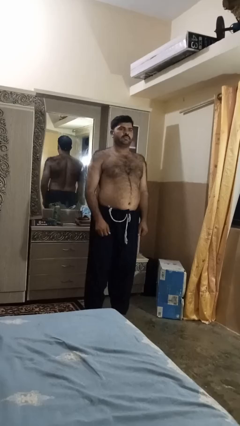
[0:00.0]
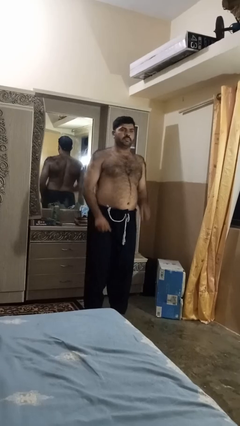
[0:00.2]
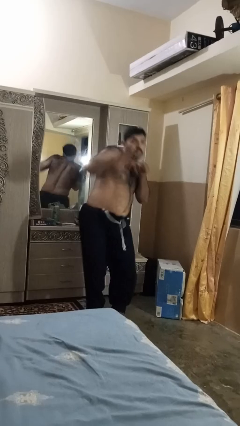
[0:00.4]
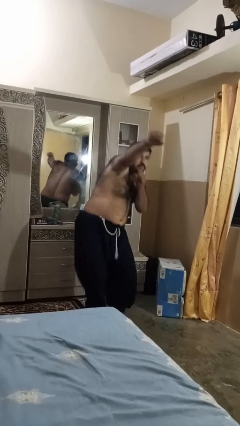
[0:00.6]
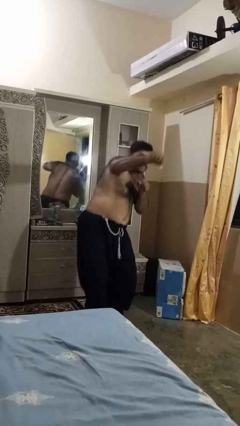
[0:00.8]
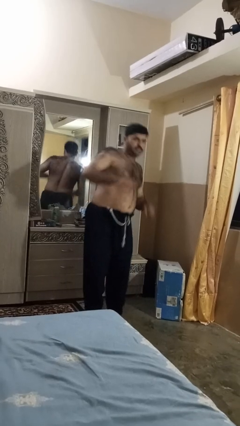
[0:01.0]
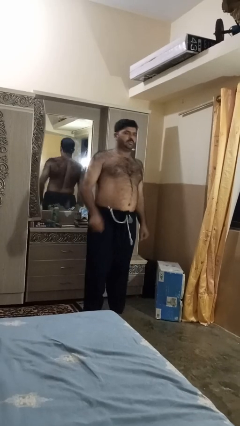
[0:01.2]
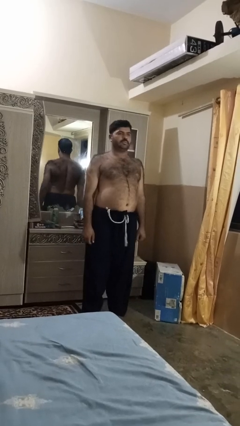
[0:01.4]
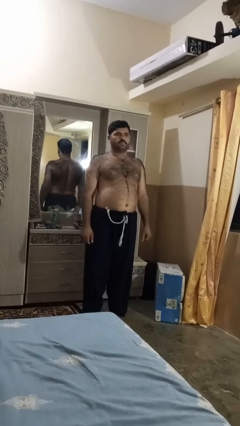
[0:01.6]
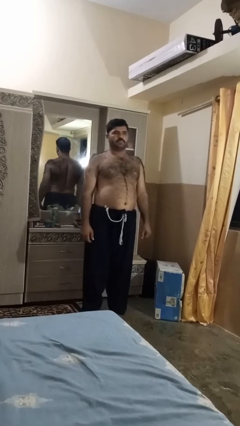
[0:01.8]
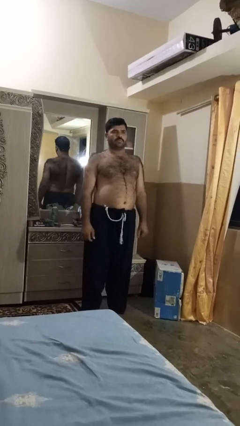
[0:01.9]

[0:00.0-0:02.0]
person karate chop

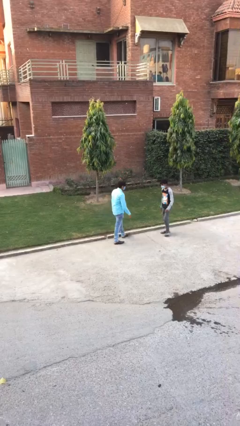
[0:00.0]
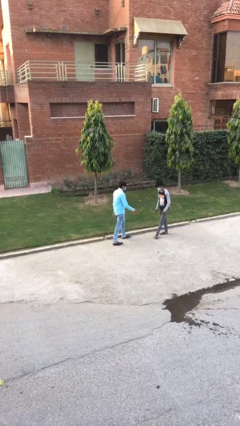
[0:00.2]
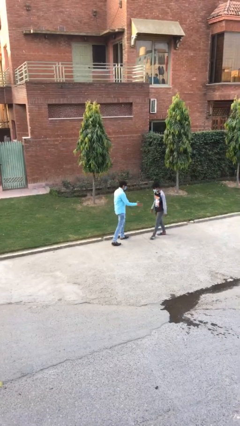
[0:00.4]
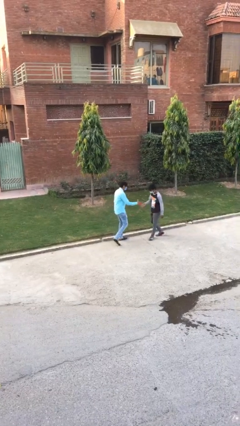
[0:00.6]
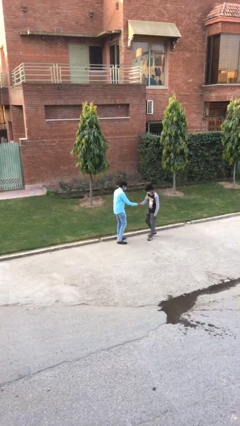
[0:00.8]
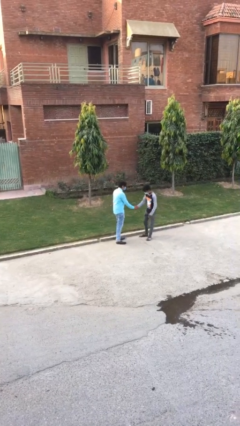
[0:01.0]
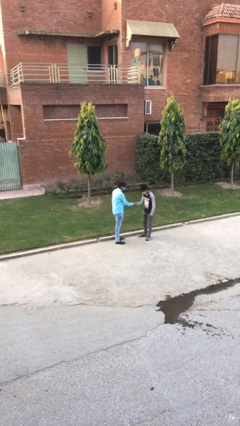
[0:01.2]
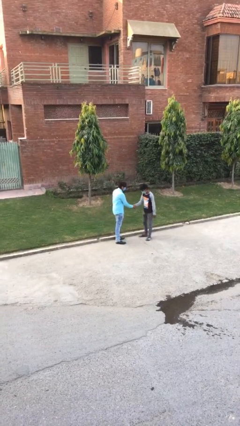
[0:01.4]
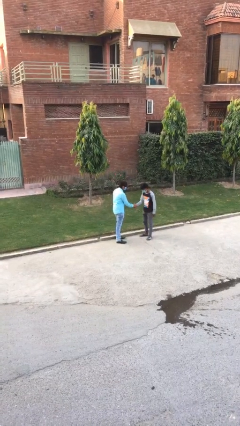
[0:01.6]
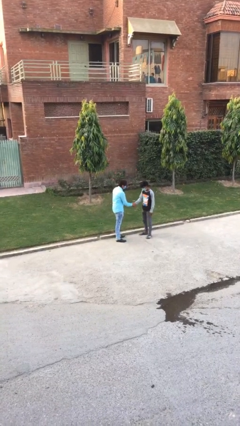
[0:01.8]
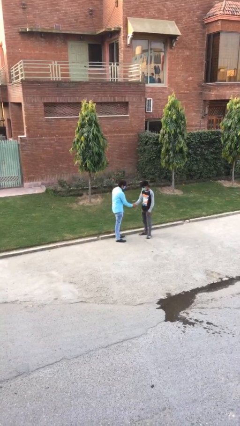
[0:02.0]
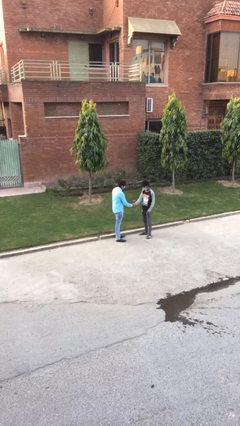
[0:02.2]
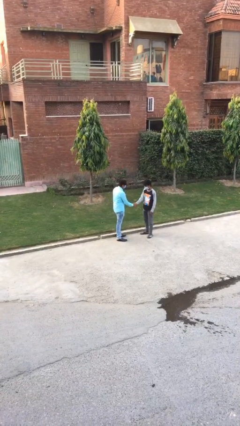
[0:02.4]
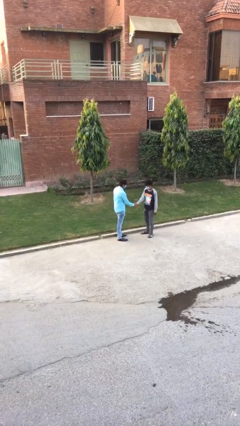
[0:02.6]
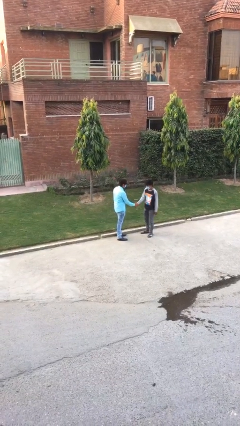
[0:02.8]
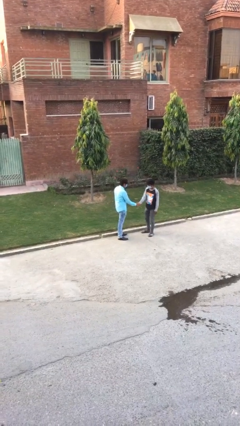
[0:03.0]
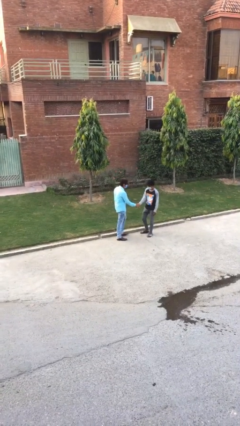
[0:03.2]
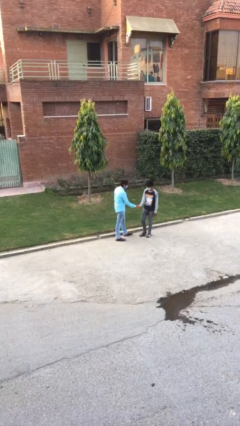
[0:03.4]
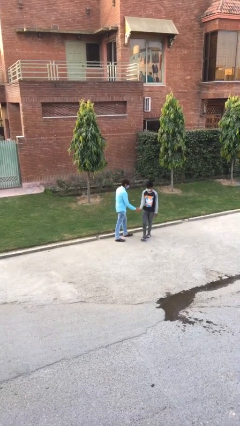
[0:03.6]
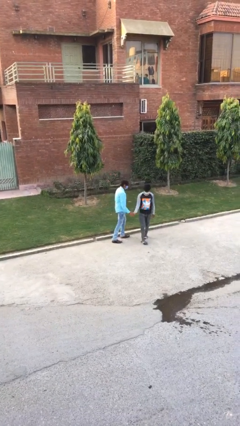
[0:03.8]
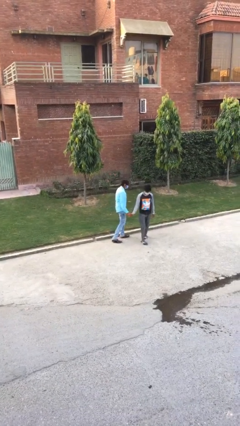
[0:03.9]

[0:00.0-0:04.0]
person shakes hand

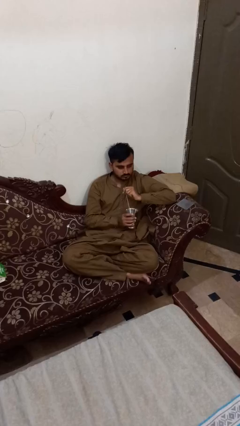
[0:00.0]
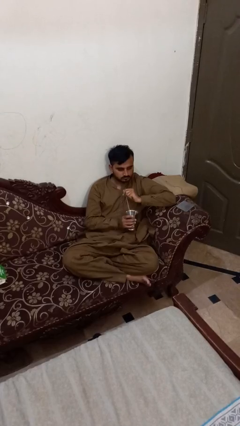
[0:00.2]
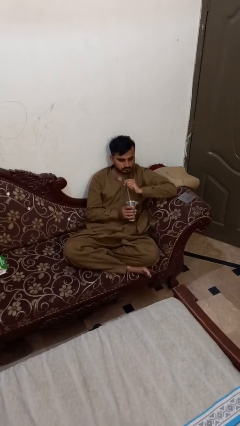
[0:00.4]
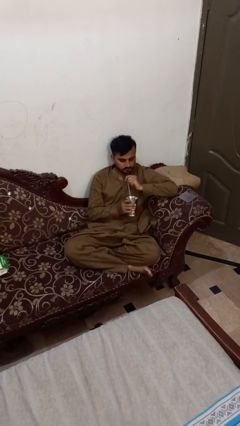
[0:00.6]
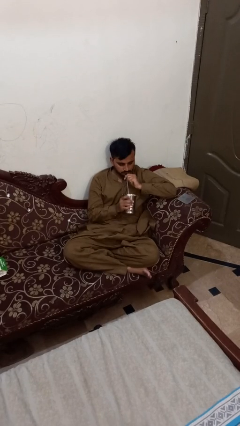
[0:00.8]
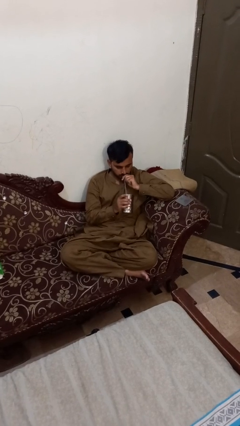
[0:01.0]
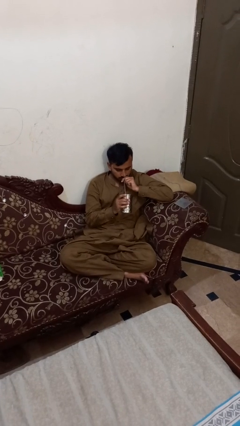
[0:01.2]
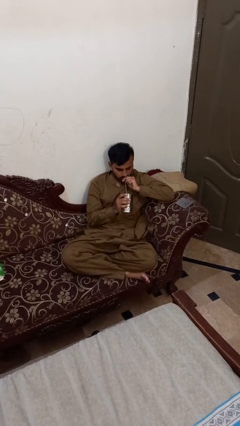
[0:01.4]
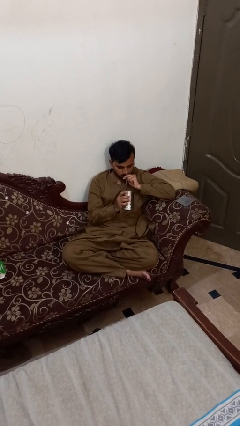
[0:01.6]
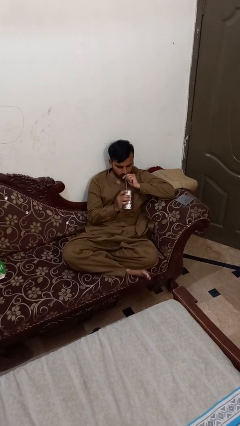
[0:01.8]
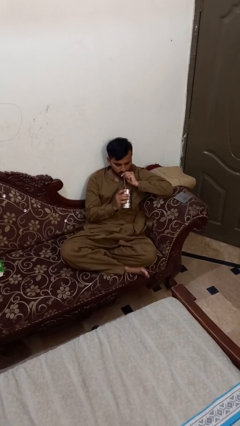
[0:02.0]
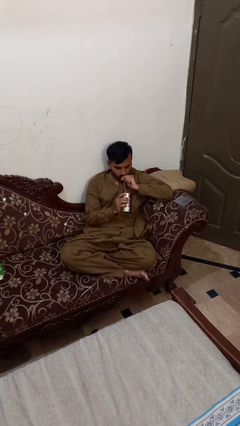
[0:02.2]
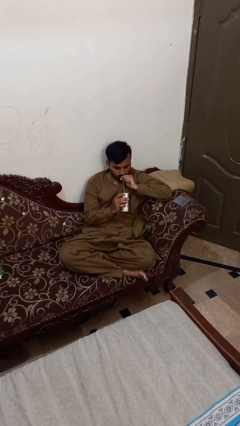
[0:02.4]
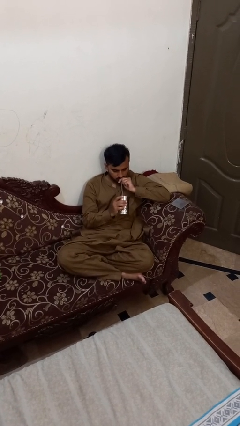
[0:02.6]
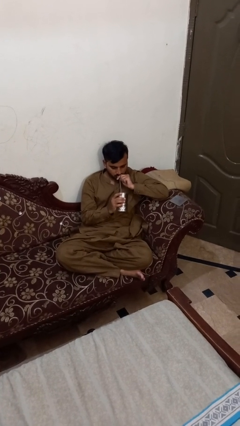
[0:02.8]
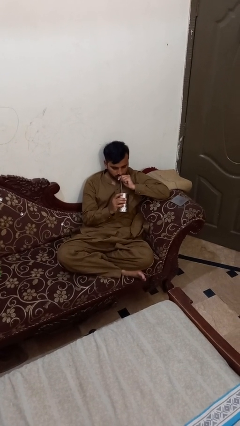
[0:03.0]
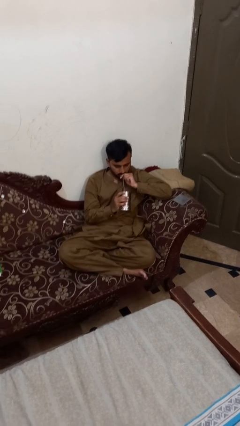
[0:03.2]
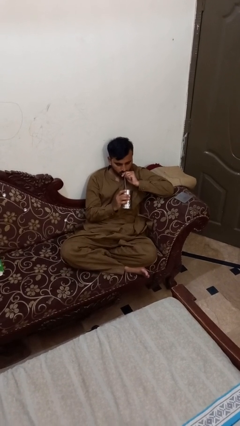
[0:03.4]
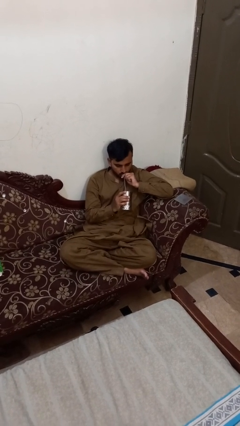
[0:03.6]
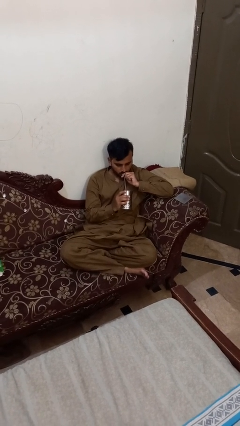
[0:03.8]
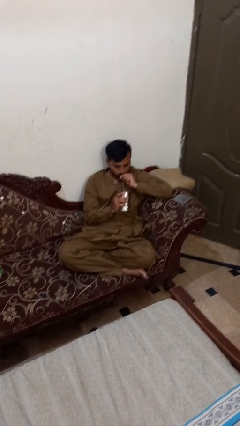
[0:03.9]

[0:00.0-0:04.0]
person drinks from straw

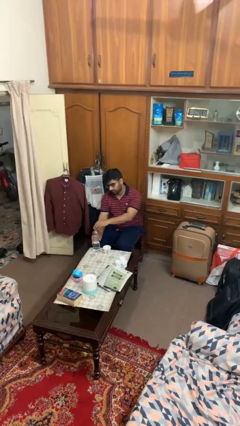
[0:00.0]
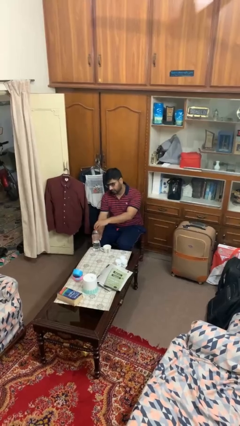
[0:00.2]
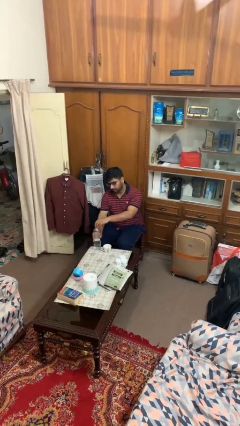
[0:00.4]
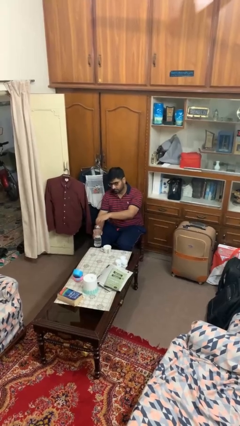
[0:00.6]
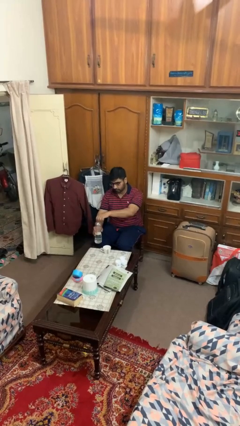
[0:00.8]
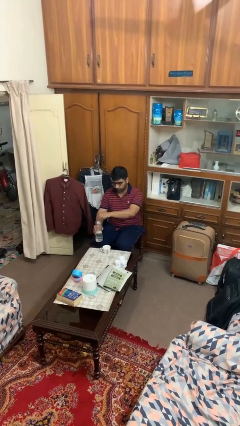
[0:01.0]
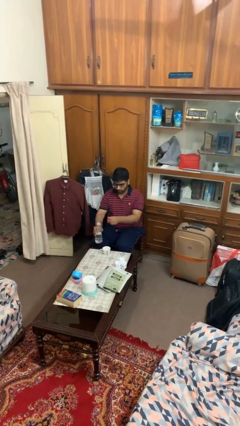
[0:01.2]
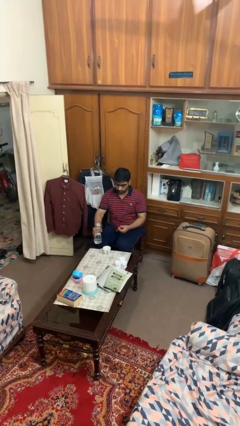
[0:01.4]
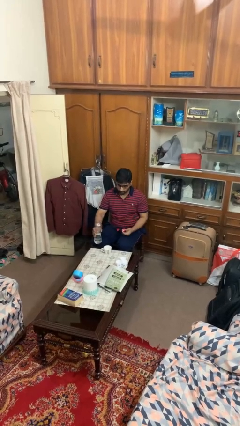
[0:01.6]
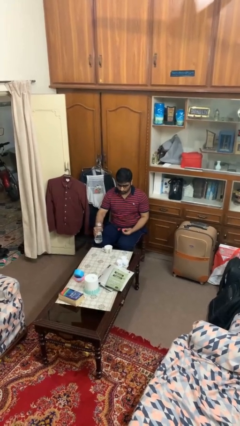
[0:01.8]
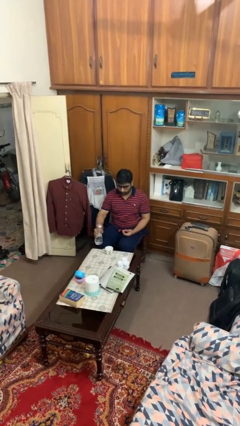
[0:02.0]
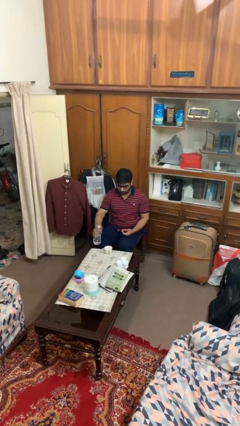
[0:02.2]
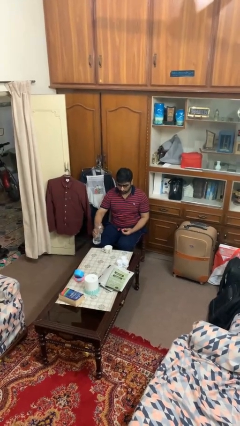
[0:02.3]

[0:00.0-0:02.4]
person unscrews lid from bottle

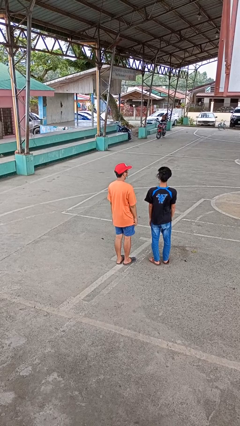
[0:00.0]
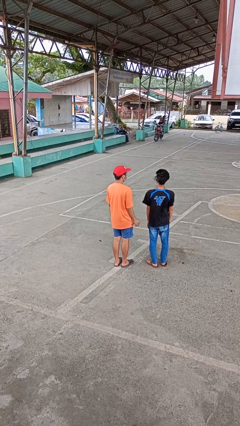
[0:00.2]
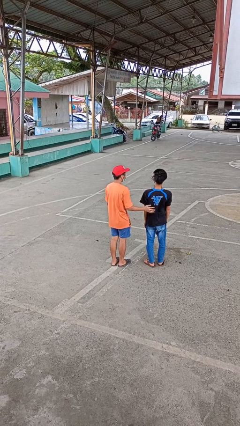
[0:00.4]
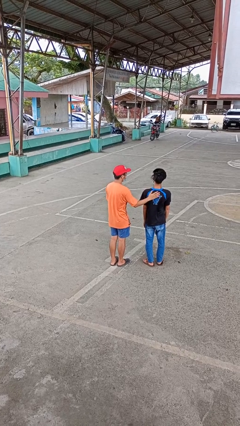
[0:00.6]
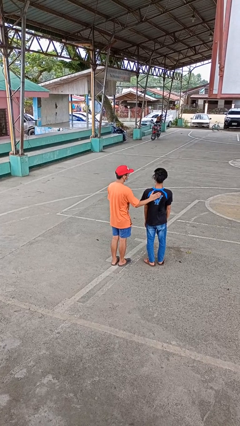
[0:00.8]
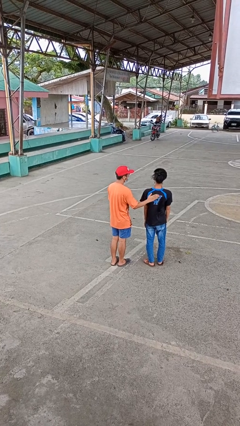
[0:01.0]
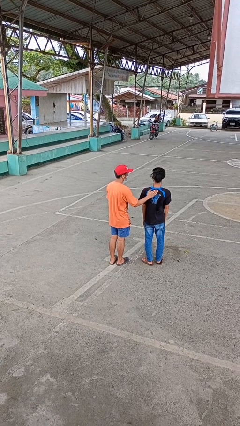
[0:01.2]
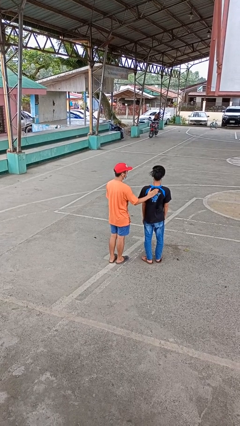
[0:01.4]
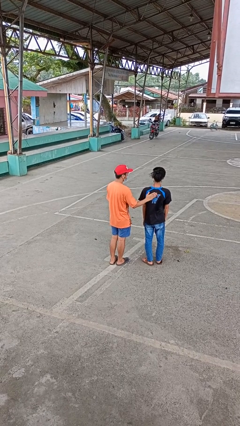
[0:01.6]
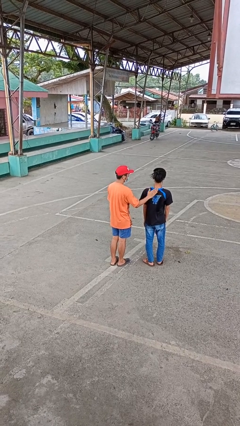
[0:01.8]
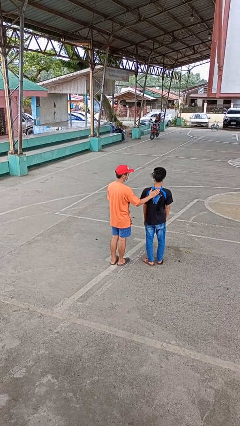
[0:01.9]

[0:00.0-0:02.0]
person touches back of person

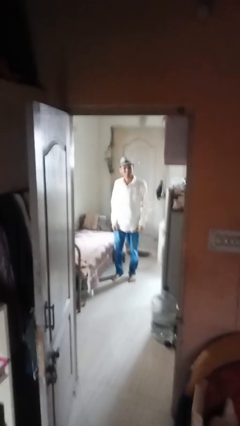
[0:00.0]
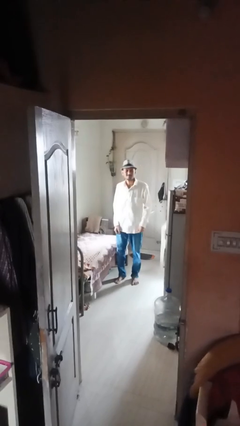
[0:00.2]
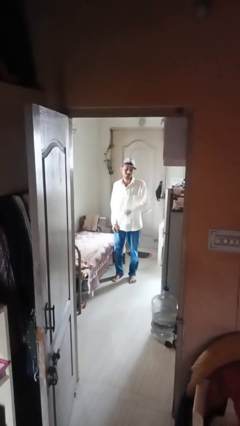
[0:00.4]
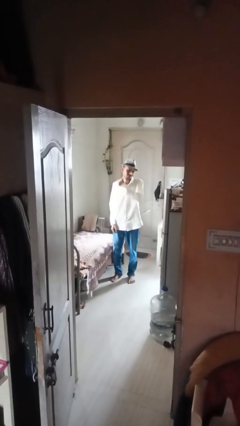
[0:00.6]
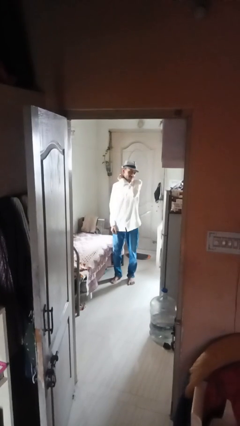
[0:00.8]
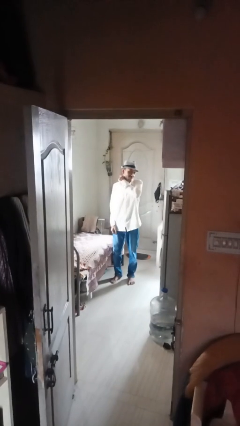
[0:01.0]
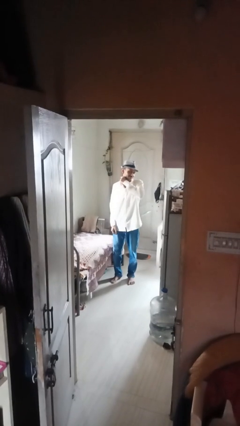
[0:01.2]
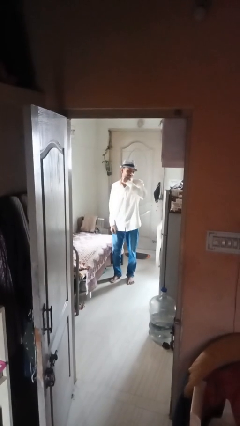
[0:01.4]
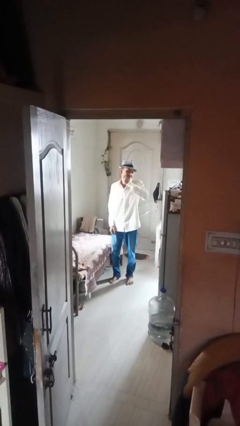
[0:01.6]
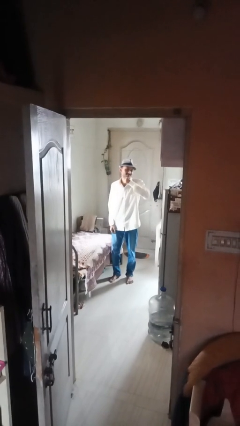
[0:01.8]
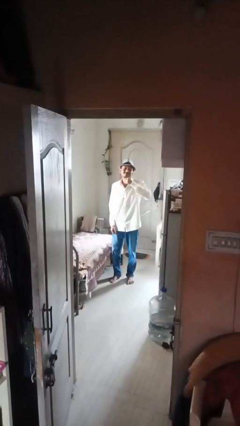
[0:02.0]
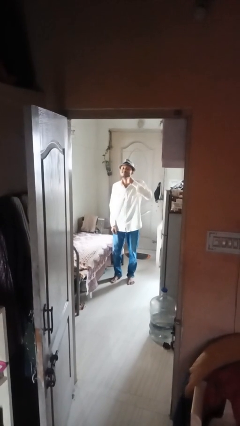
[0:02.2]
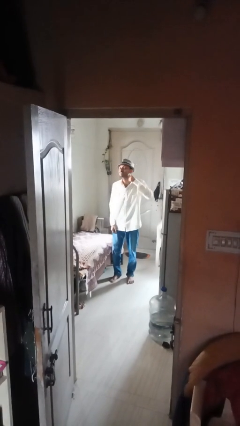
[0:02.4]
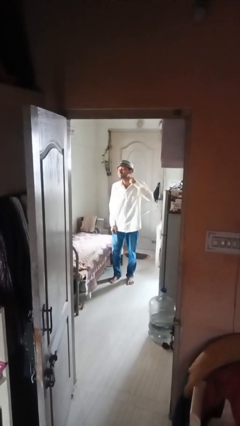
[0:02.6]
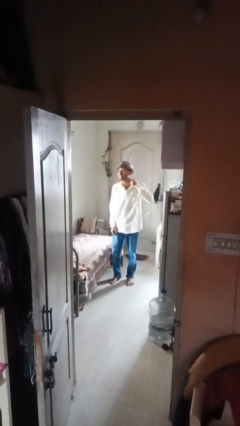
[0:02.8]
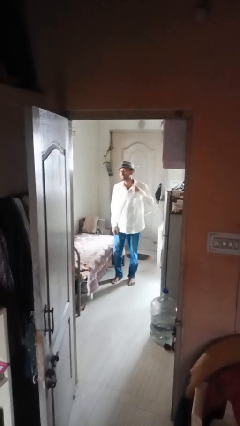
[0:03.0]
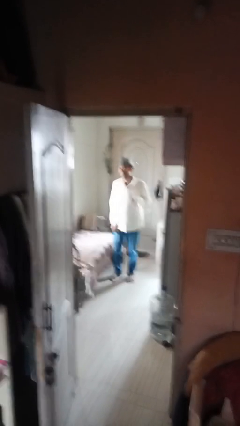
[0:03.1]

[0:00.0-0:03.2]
person gestures cut
